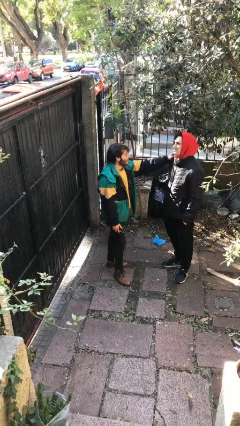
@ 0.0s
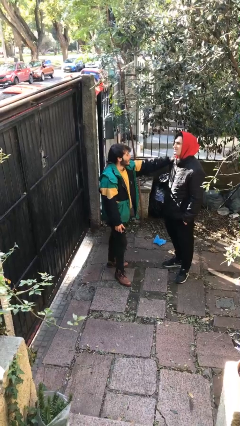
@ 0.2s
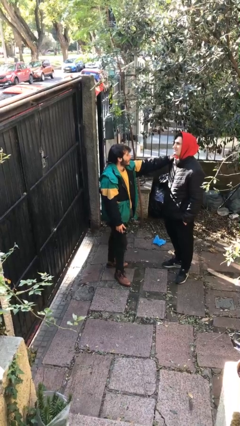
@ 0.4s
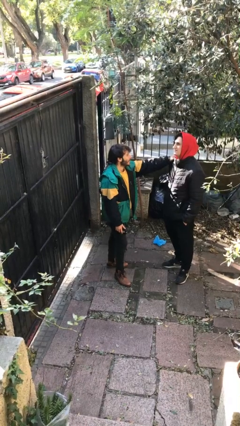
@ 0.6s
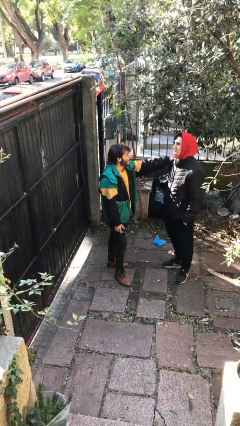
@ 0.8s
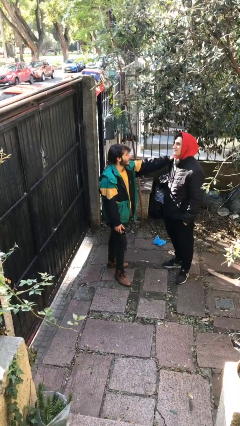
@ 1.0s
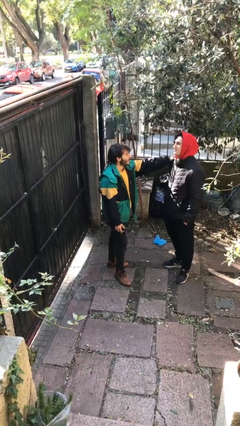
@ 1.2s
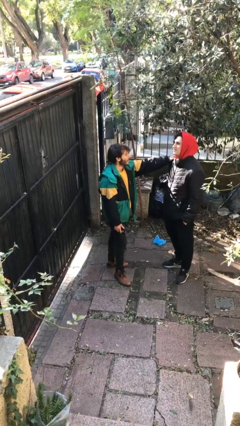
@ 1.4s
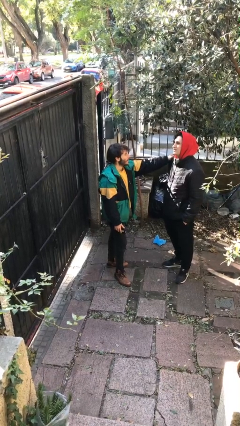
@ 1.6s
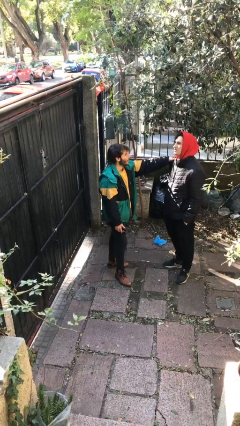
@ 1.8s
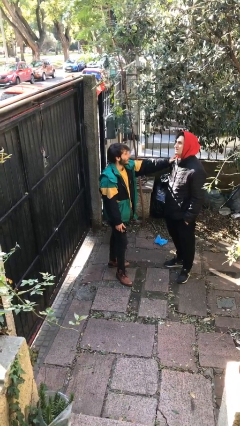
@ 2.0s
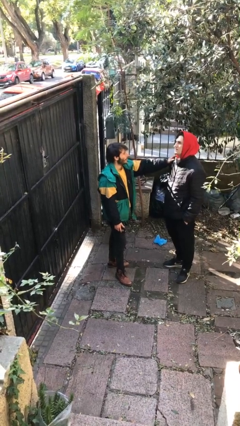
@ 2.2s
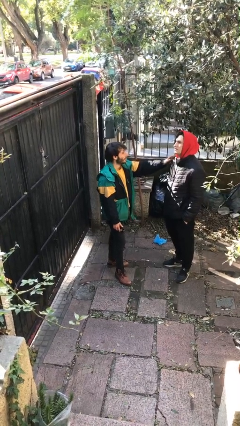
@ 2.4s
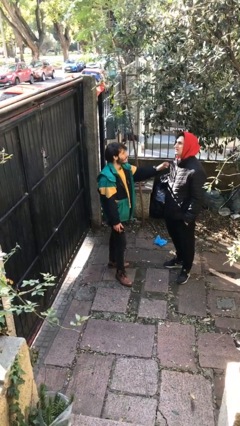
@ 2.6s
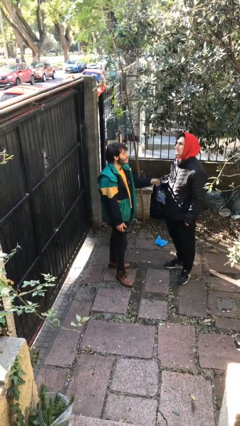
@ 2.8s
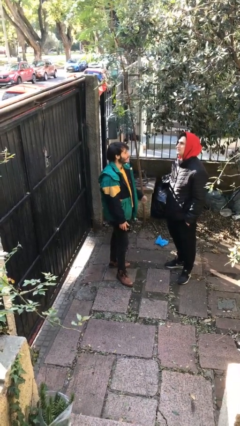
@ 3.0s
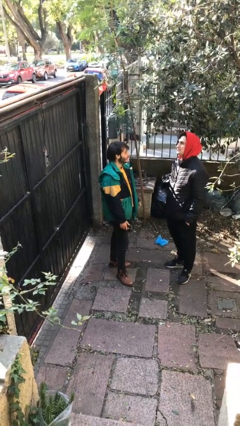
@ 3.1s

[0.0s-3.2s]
person pounds shoulders of person

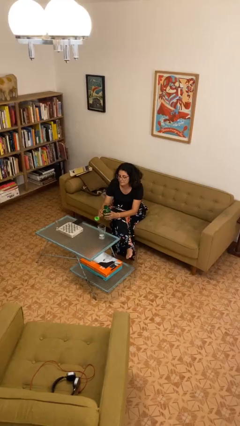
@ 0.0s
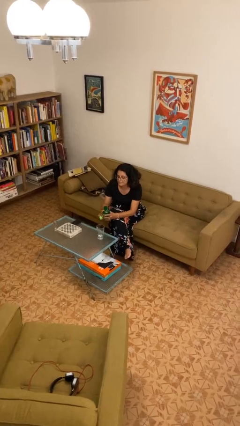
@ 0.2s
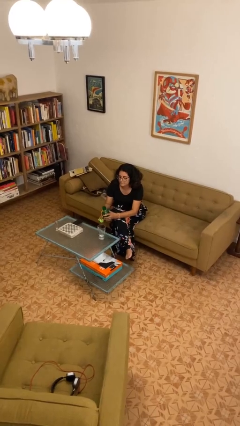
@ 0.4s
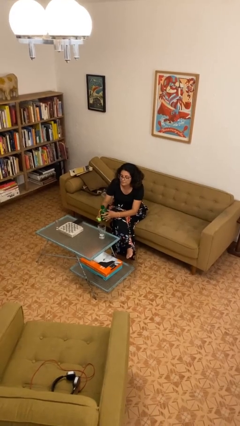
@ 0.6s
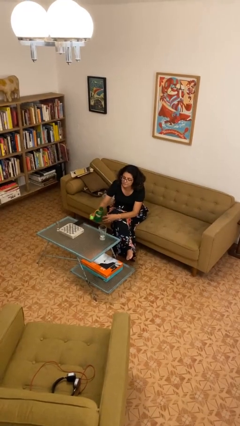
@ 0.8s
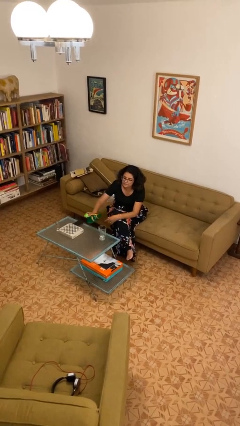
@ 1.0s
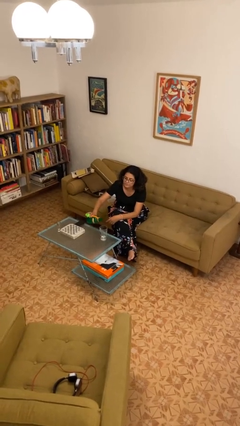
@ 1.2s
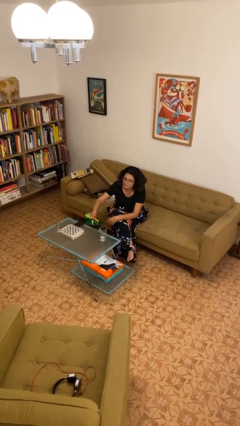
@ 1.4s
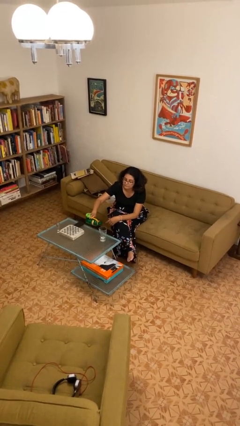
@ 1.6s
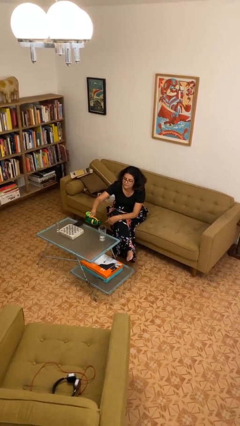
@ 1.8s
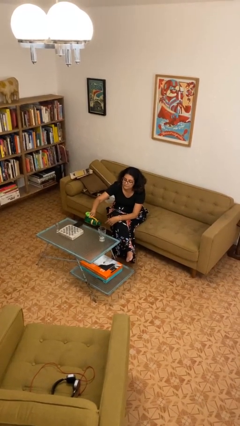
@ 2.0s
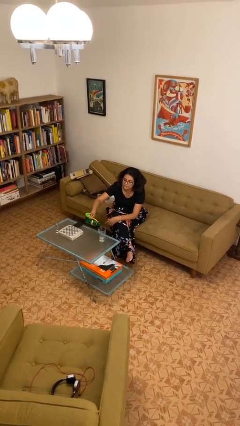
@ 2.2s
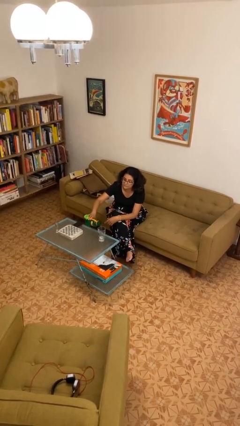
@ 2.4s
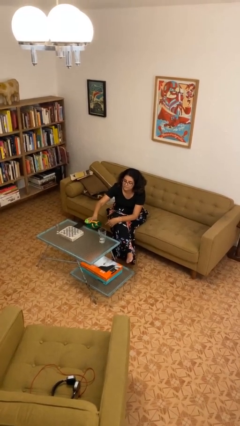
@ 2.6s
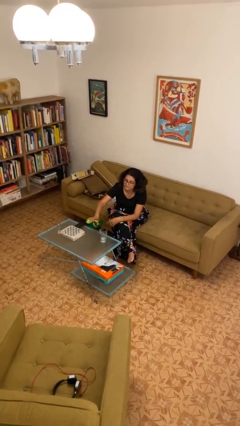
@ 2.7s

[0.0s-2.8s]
person pours liquid into cup

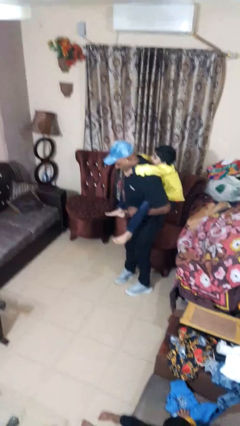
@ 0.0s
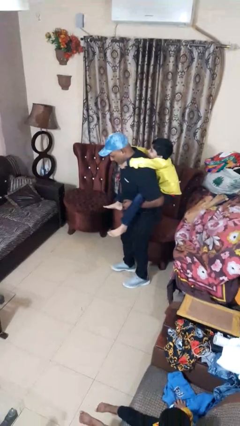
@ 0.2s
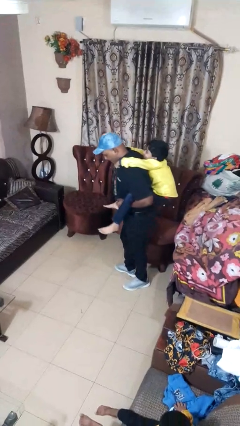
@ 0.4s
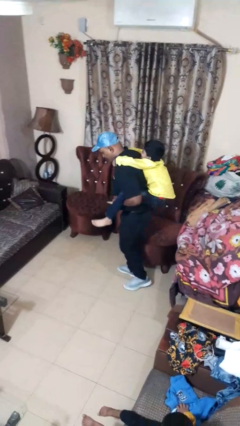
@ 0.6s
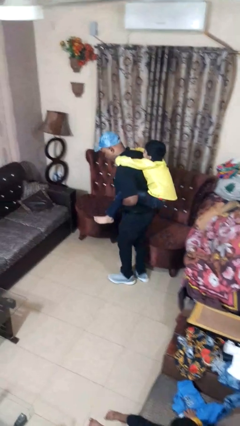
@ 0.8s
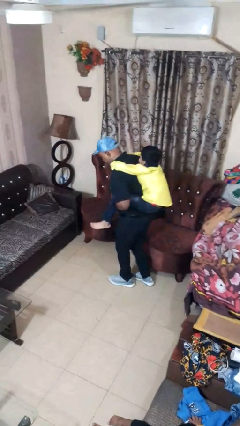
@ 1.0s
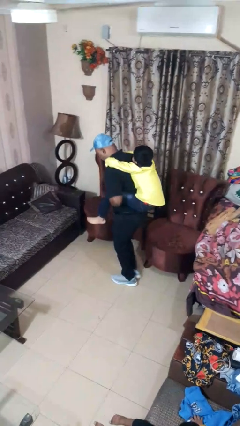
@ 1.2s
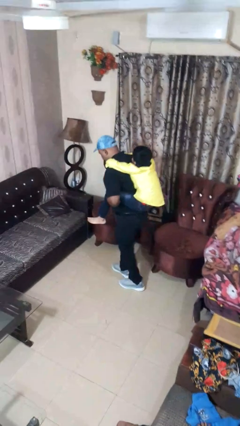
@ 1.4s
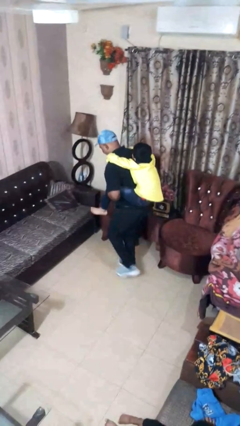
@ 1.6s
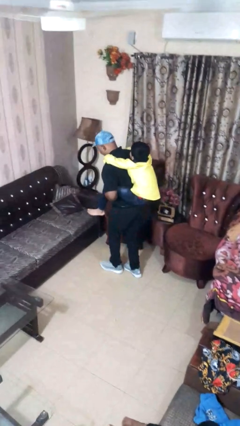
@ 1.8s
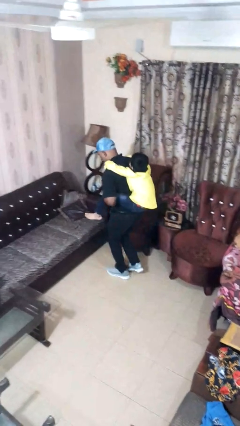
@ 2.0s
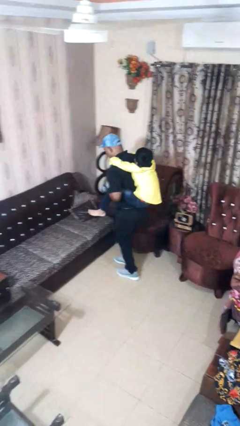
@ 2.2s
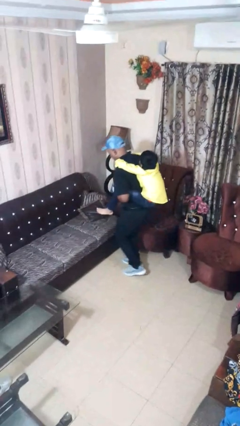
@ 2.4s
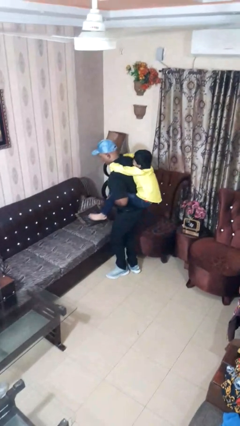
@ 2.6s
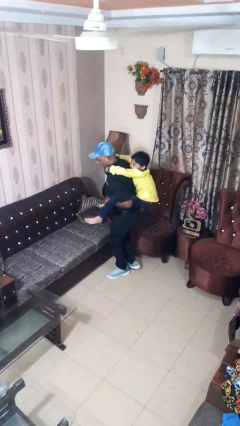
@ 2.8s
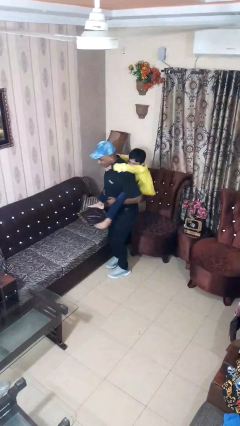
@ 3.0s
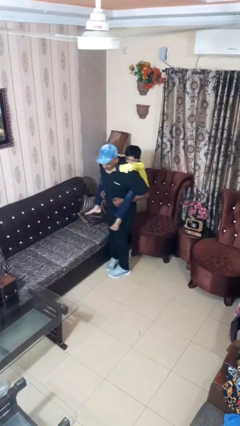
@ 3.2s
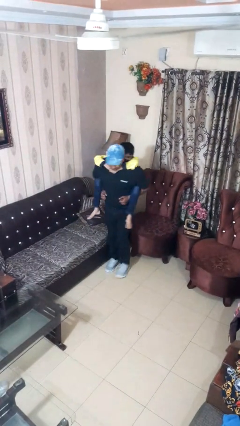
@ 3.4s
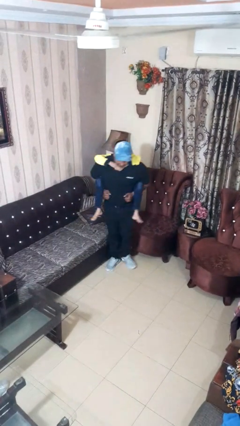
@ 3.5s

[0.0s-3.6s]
person carries person on back

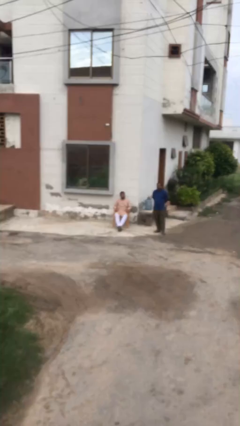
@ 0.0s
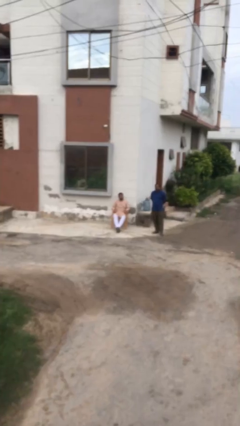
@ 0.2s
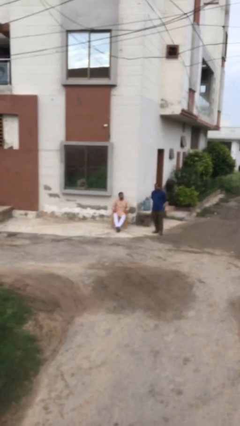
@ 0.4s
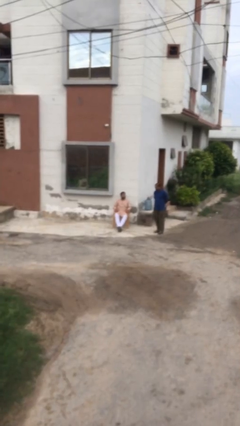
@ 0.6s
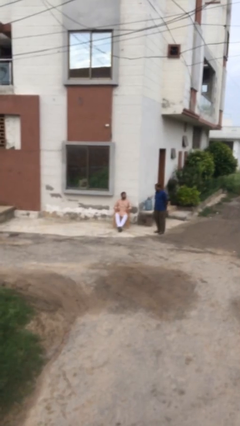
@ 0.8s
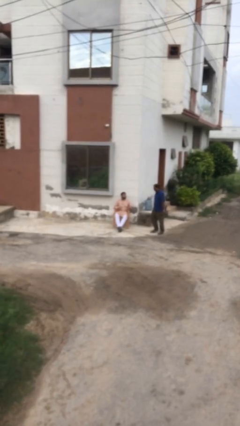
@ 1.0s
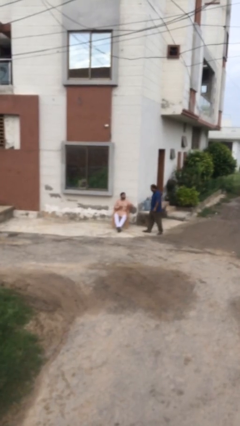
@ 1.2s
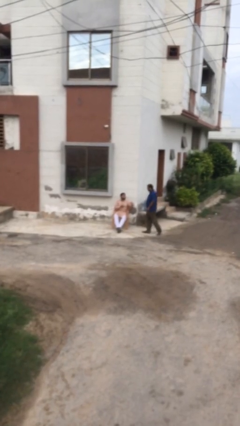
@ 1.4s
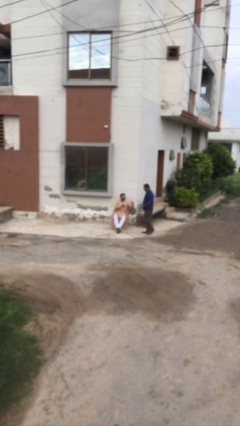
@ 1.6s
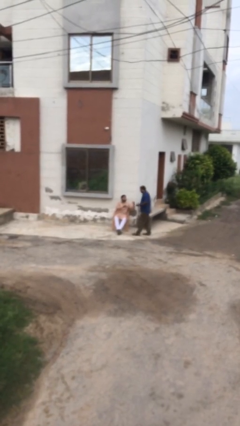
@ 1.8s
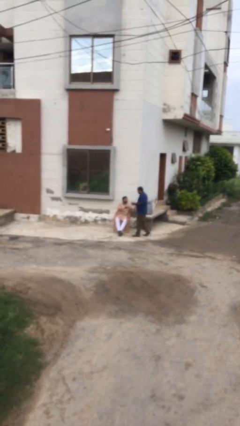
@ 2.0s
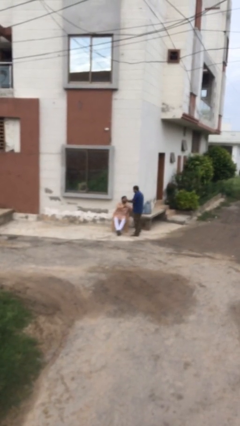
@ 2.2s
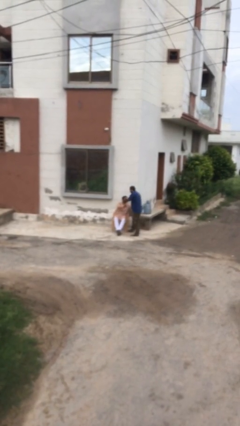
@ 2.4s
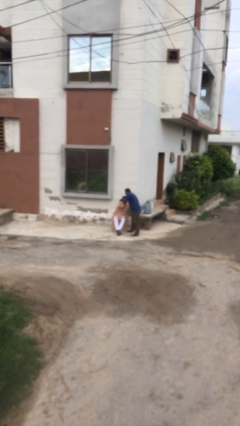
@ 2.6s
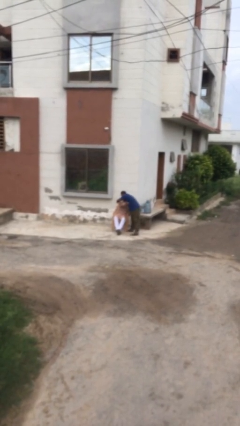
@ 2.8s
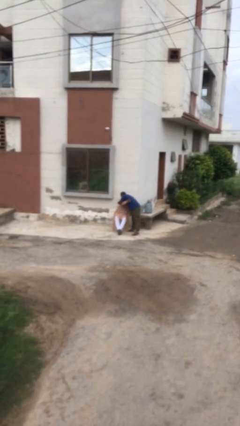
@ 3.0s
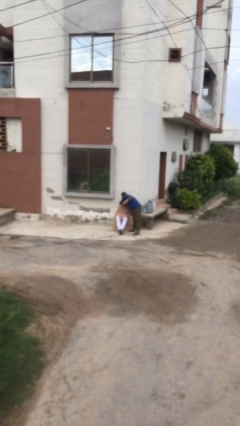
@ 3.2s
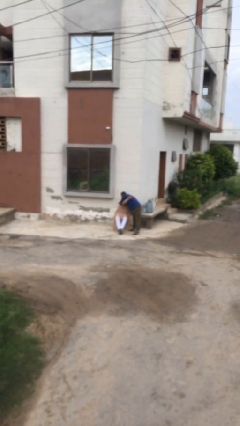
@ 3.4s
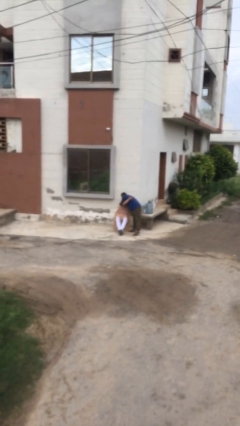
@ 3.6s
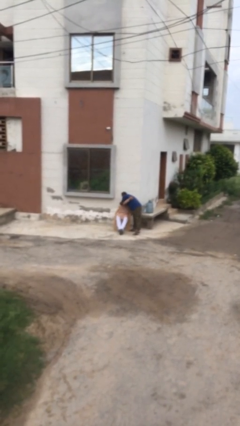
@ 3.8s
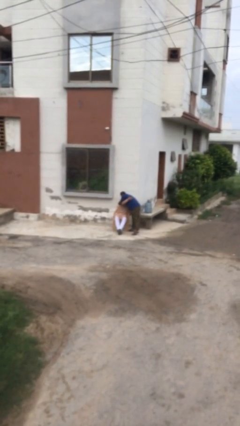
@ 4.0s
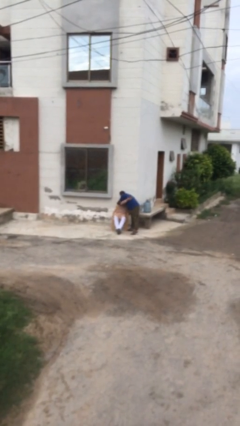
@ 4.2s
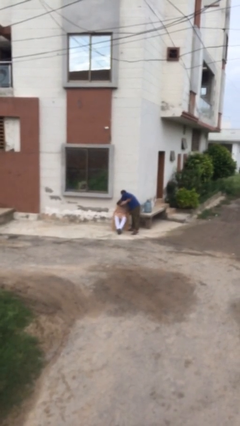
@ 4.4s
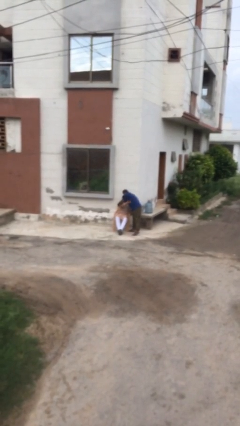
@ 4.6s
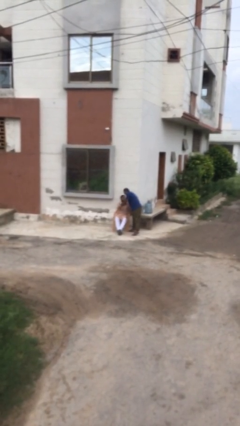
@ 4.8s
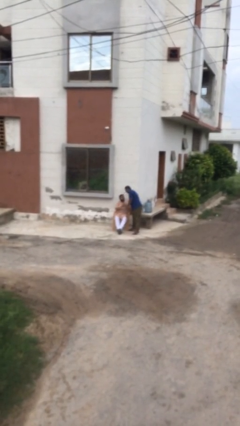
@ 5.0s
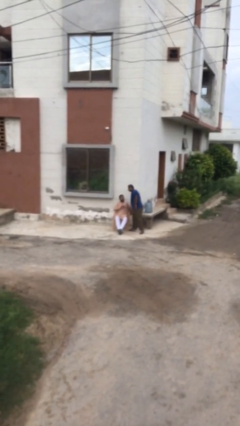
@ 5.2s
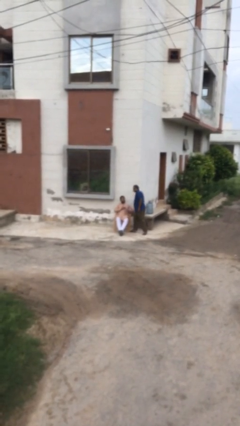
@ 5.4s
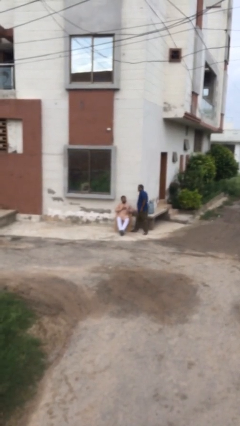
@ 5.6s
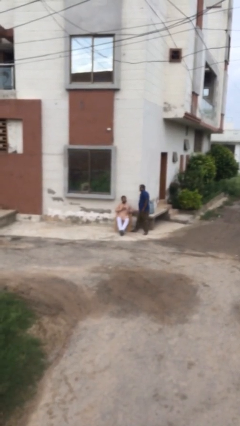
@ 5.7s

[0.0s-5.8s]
person embraces person

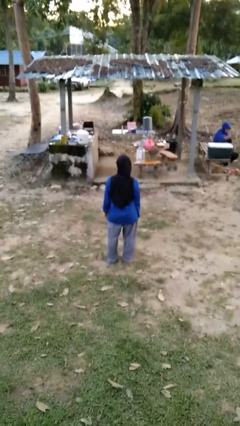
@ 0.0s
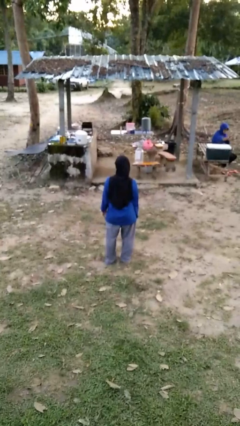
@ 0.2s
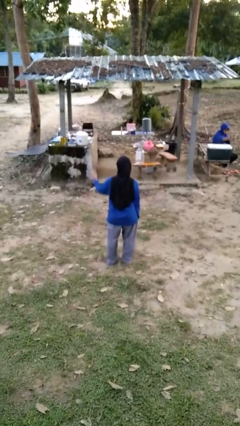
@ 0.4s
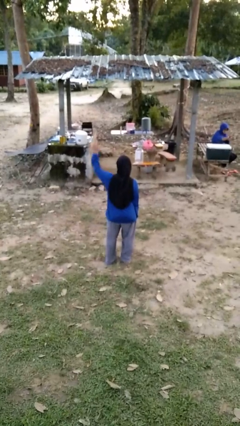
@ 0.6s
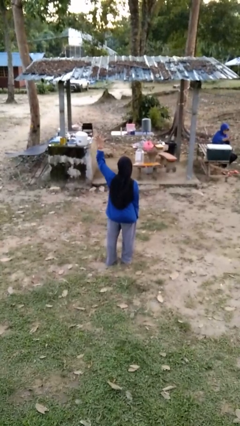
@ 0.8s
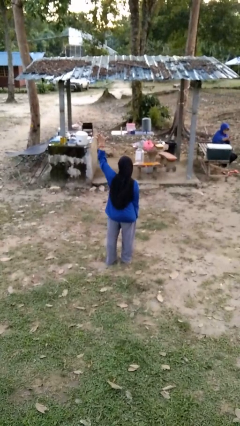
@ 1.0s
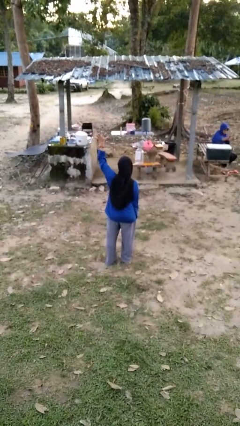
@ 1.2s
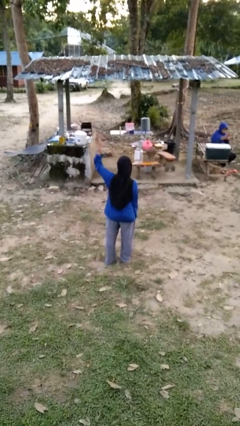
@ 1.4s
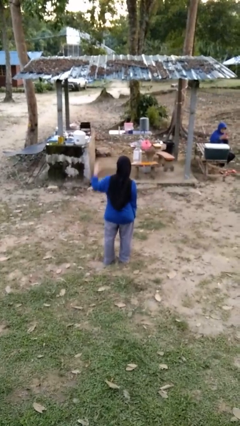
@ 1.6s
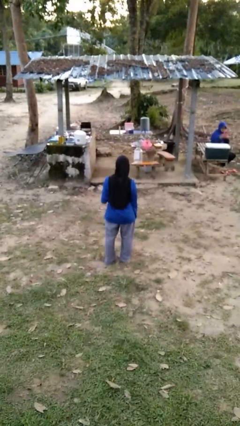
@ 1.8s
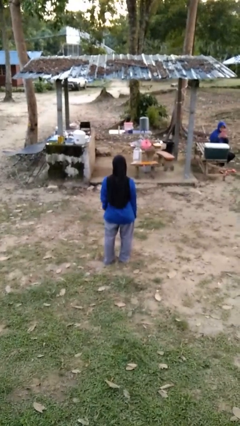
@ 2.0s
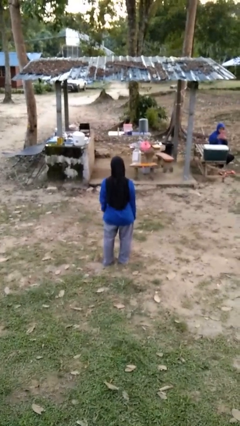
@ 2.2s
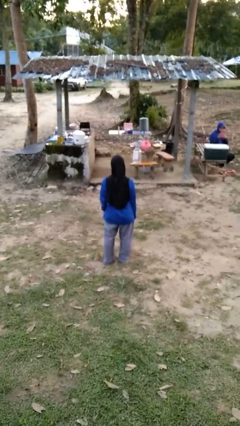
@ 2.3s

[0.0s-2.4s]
person gestures number five

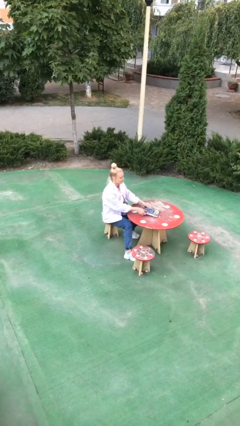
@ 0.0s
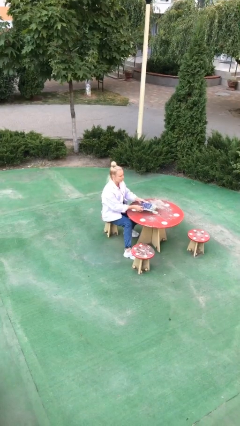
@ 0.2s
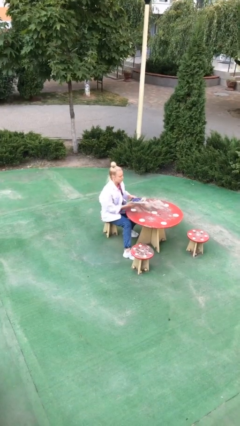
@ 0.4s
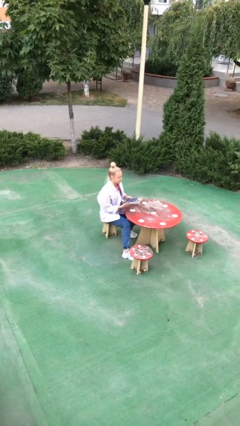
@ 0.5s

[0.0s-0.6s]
person picks up object from table
